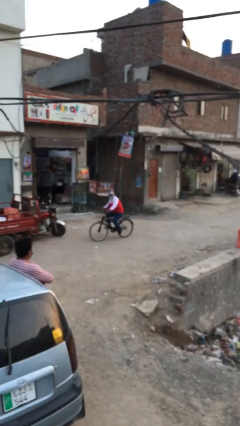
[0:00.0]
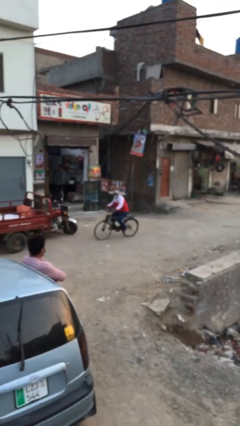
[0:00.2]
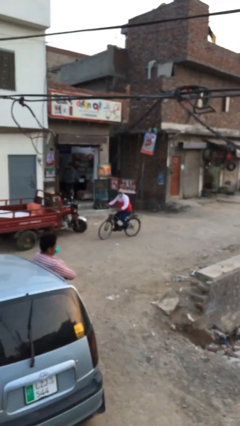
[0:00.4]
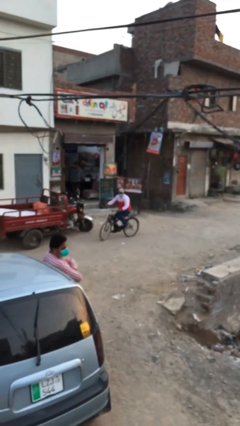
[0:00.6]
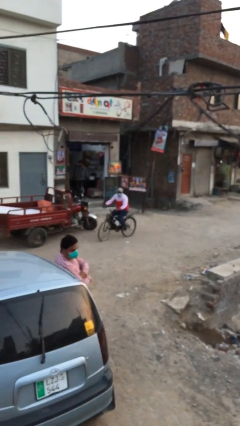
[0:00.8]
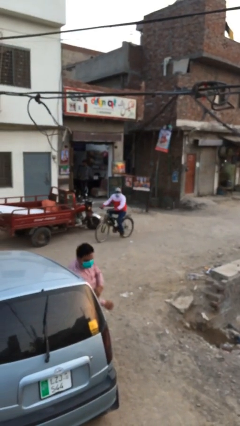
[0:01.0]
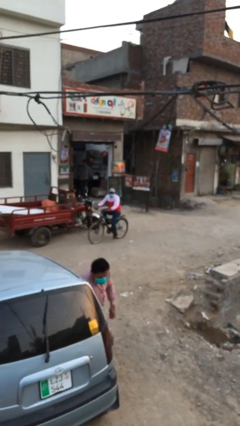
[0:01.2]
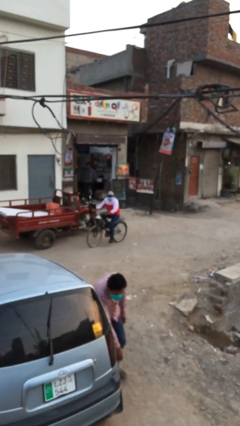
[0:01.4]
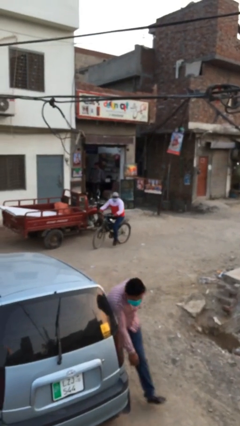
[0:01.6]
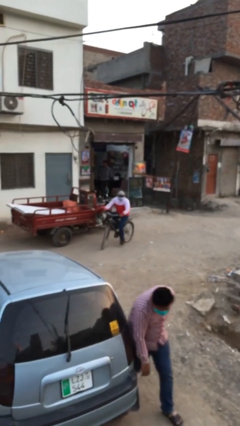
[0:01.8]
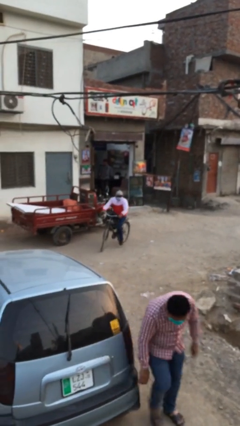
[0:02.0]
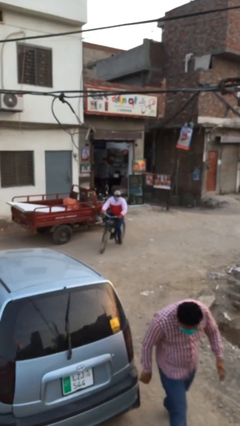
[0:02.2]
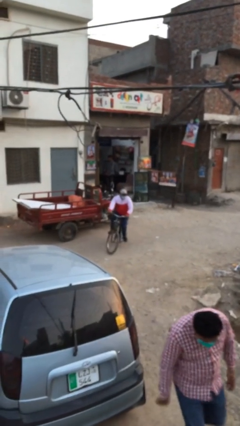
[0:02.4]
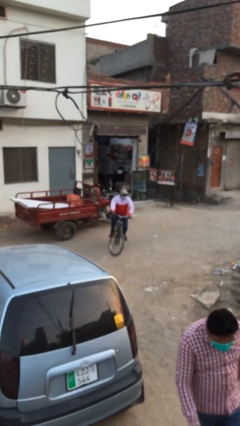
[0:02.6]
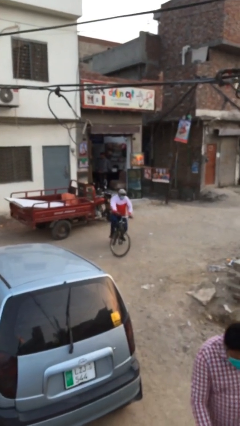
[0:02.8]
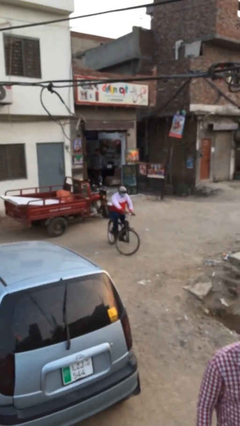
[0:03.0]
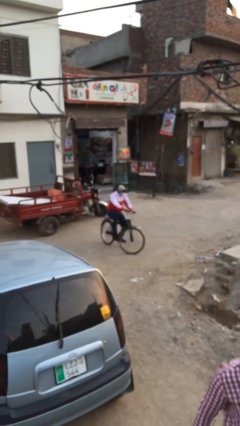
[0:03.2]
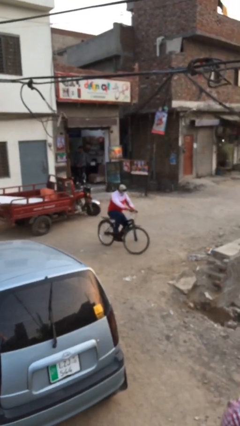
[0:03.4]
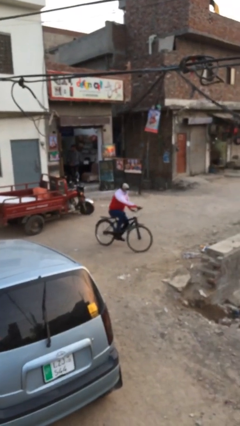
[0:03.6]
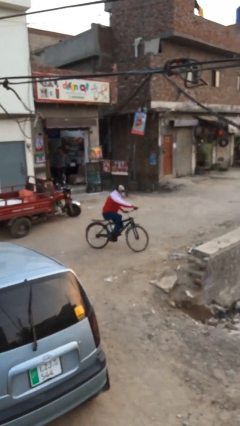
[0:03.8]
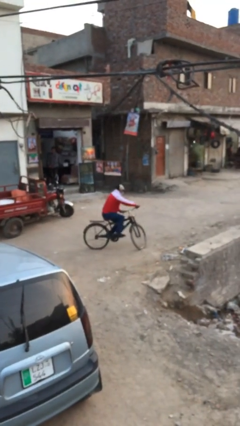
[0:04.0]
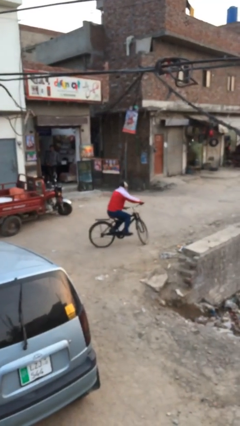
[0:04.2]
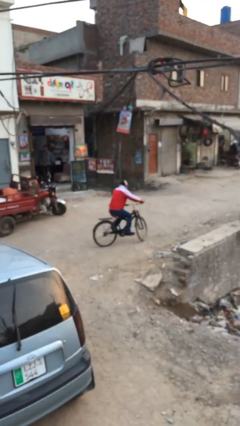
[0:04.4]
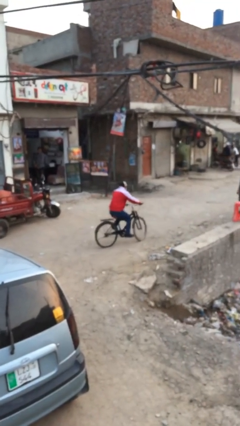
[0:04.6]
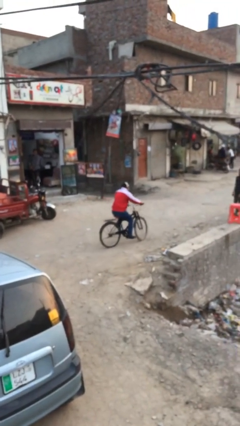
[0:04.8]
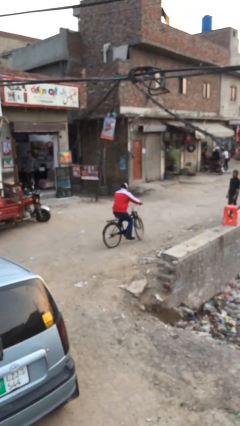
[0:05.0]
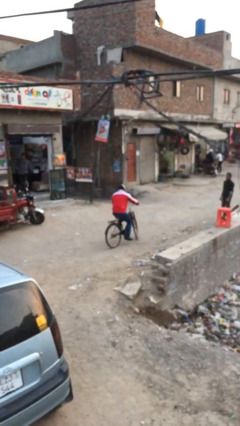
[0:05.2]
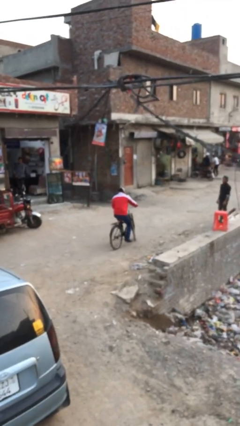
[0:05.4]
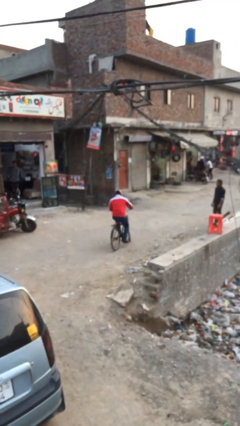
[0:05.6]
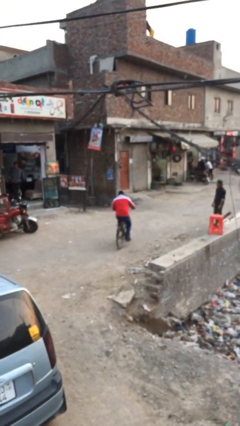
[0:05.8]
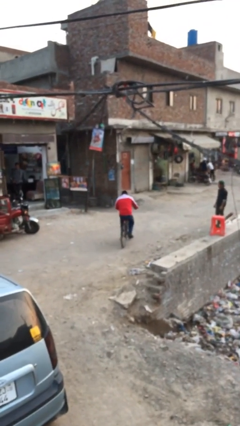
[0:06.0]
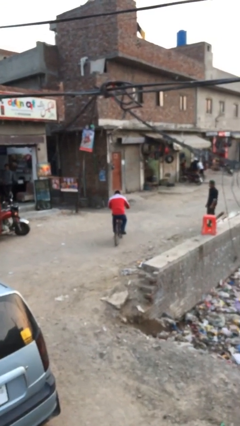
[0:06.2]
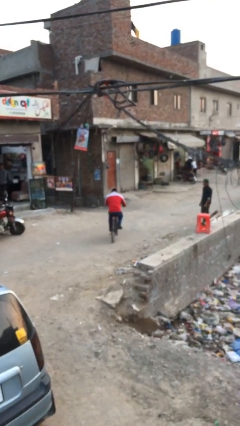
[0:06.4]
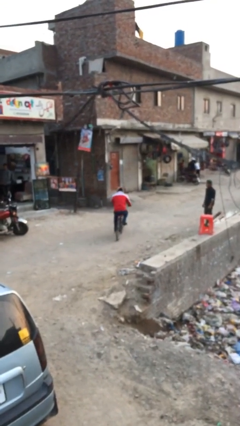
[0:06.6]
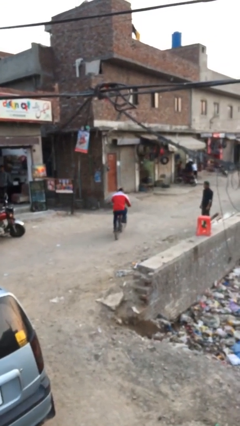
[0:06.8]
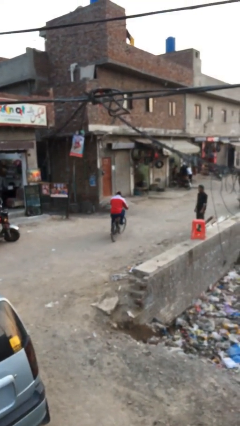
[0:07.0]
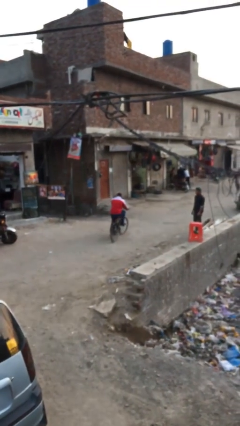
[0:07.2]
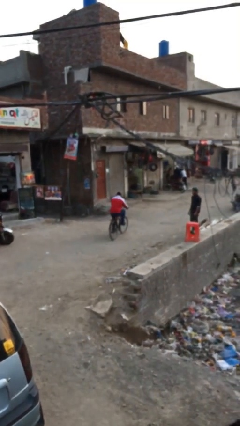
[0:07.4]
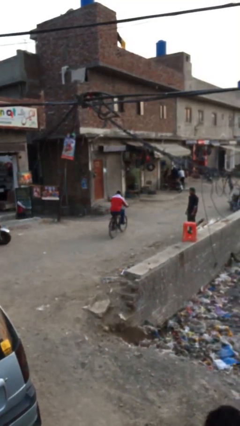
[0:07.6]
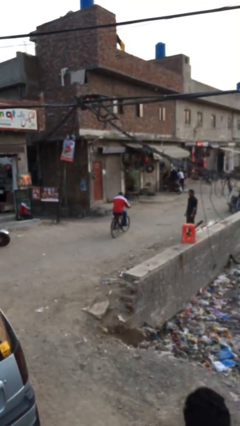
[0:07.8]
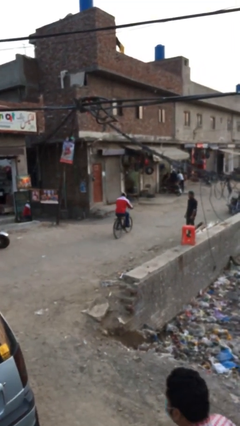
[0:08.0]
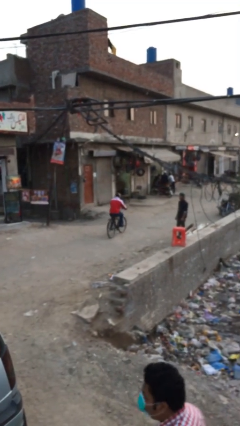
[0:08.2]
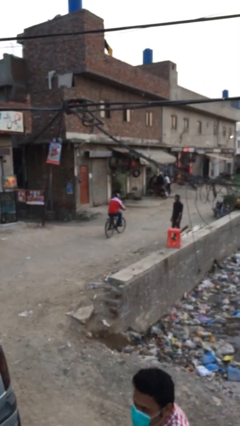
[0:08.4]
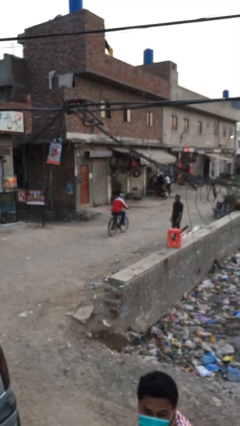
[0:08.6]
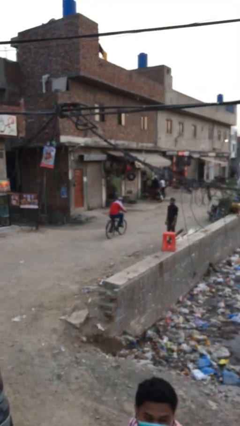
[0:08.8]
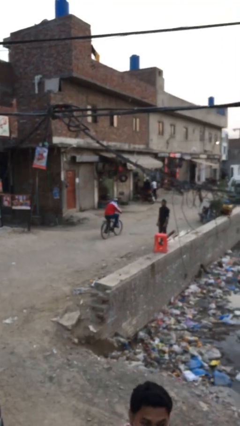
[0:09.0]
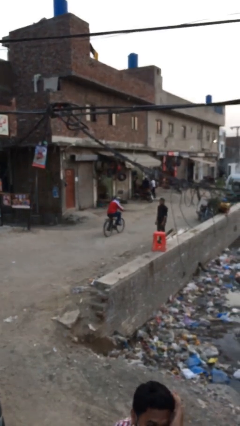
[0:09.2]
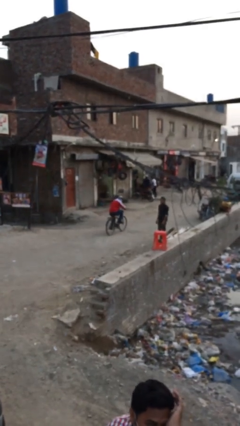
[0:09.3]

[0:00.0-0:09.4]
person rides bicycle

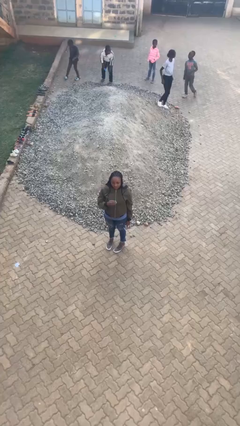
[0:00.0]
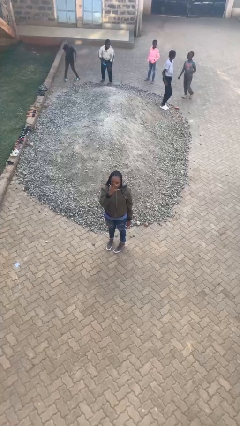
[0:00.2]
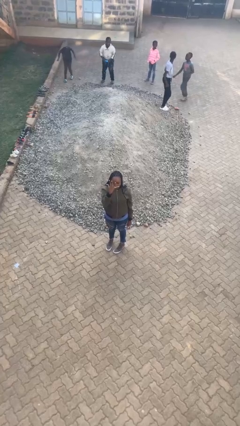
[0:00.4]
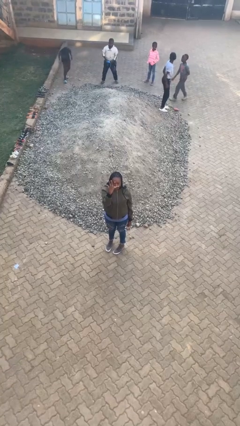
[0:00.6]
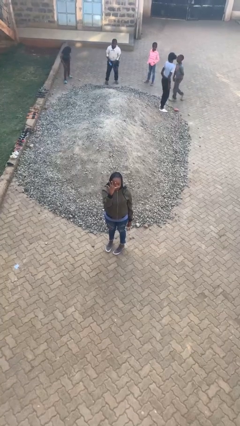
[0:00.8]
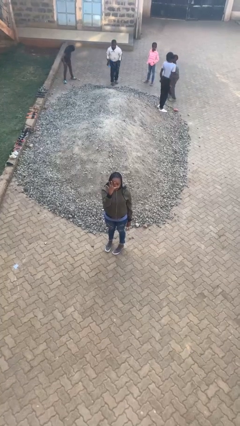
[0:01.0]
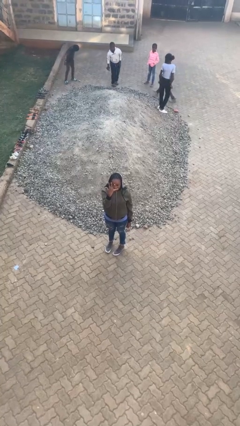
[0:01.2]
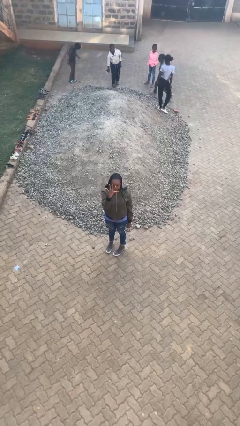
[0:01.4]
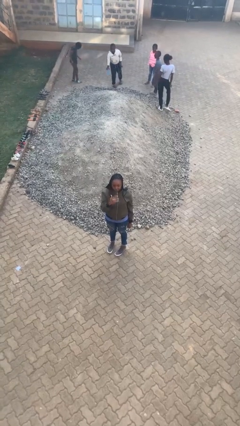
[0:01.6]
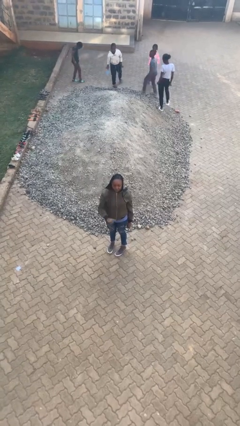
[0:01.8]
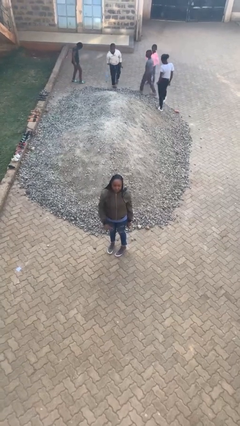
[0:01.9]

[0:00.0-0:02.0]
person gestures number five

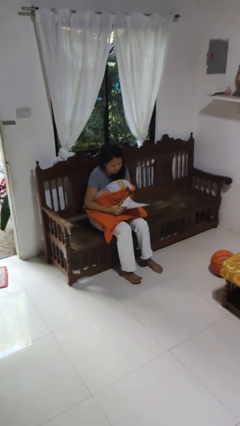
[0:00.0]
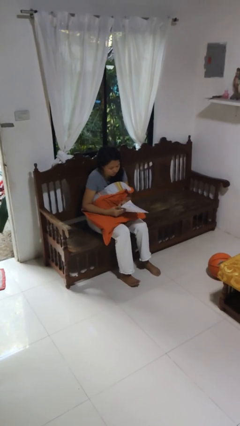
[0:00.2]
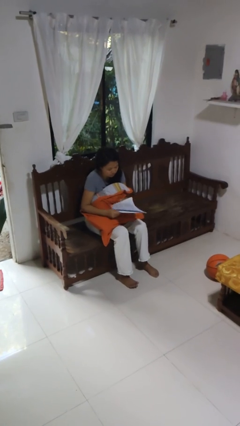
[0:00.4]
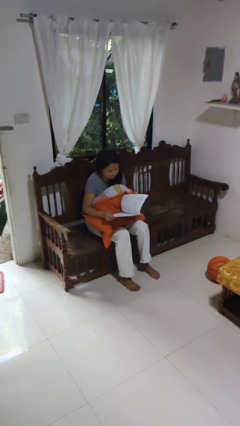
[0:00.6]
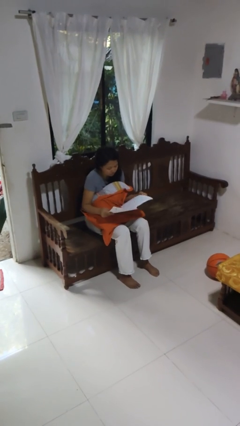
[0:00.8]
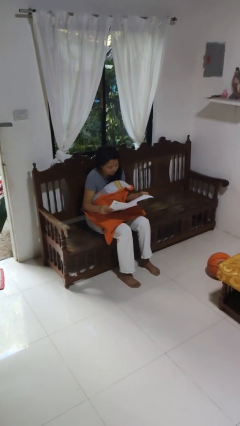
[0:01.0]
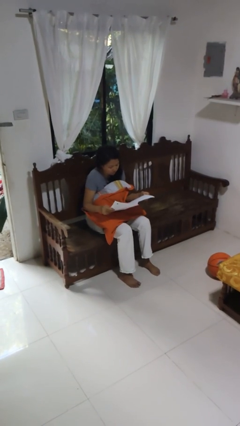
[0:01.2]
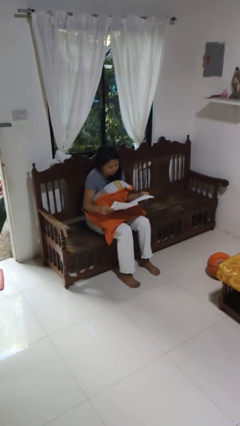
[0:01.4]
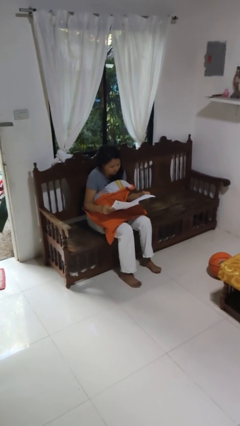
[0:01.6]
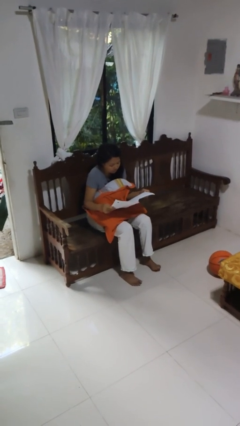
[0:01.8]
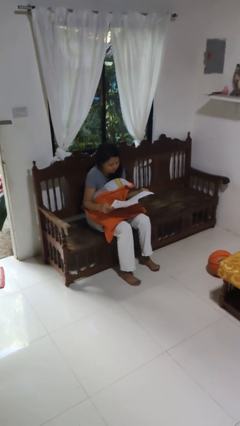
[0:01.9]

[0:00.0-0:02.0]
person reads newspaper

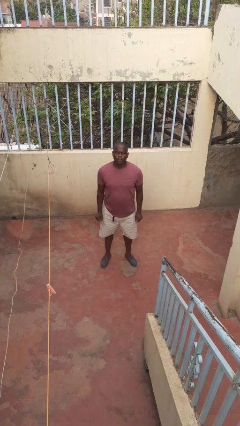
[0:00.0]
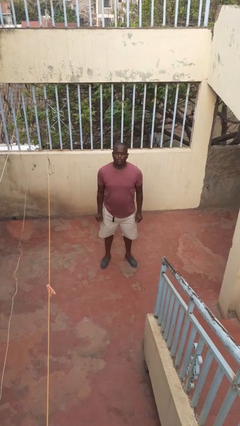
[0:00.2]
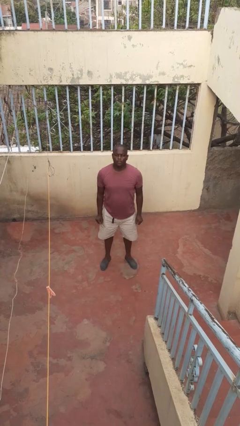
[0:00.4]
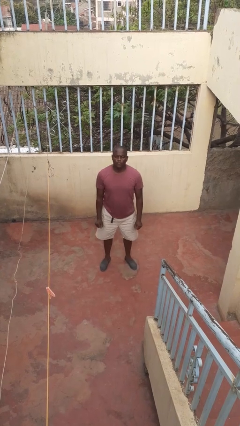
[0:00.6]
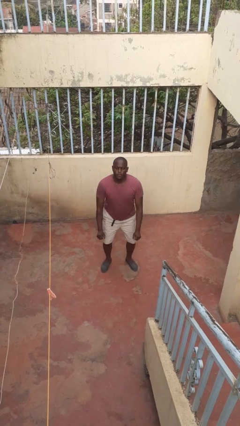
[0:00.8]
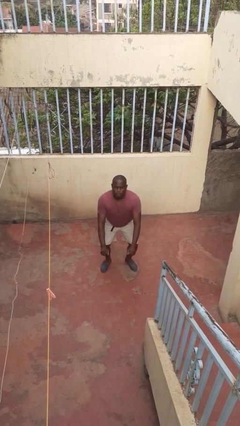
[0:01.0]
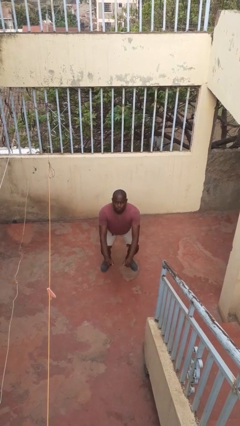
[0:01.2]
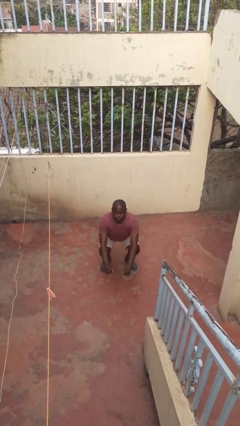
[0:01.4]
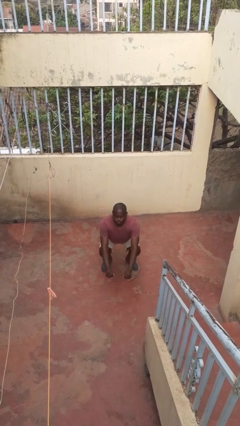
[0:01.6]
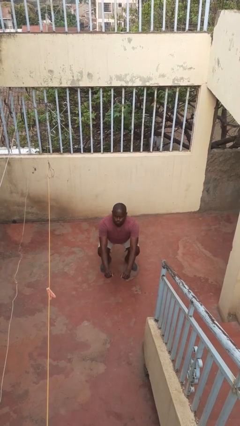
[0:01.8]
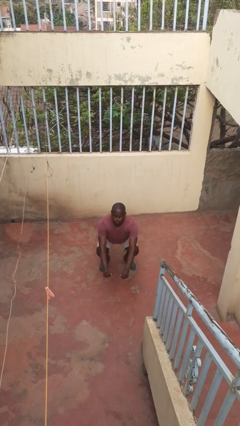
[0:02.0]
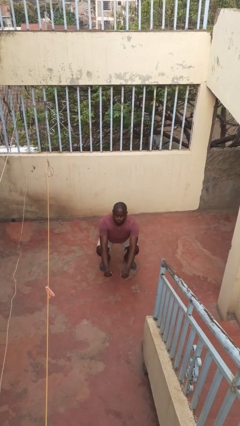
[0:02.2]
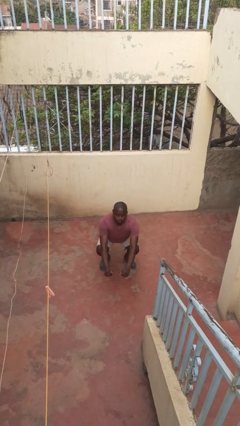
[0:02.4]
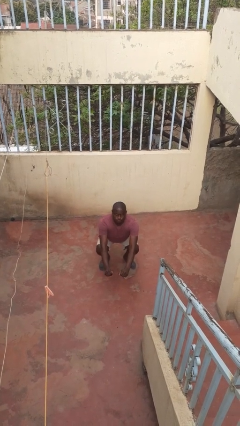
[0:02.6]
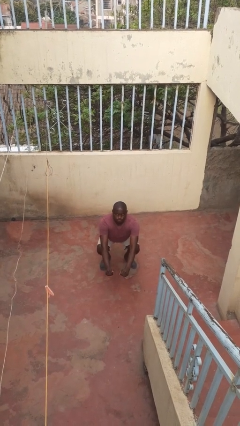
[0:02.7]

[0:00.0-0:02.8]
person squats

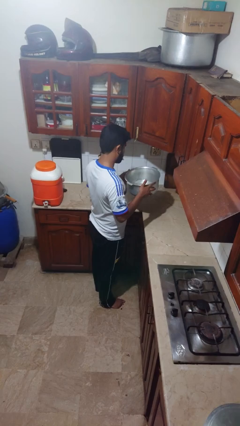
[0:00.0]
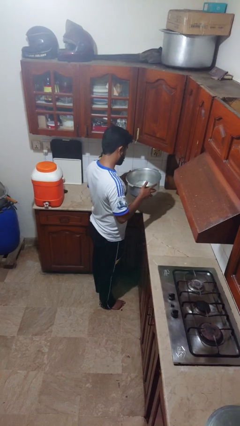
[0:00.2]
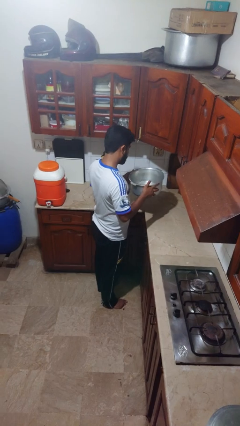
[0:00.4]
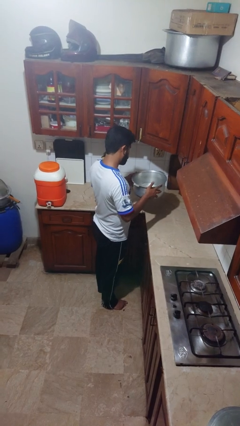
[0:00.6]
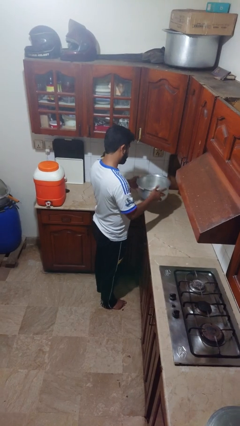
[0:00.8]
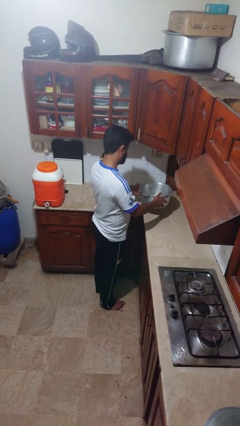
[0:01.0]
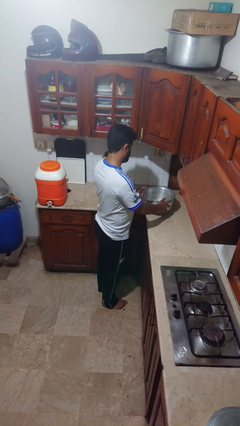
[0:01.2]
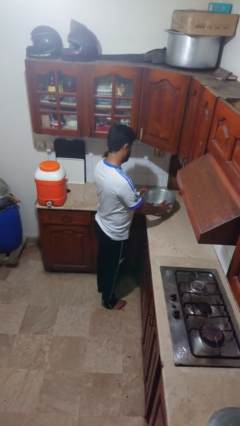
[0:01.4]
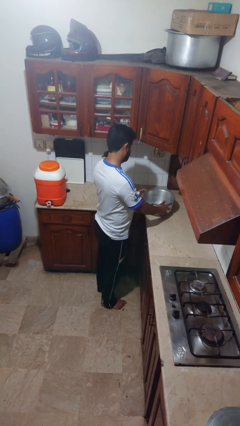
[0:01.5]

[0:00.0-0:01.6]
person puts down object on countertop
